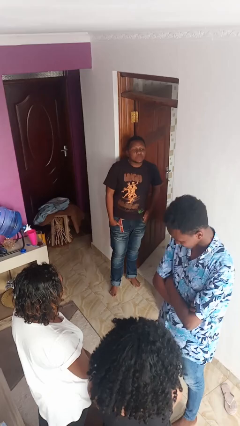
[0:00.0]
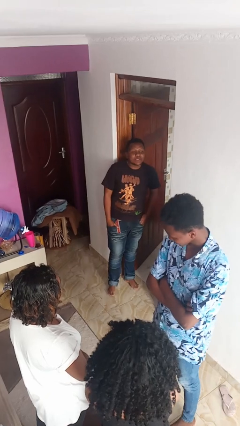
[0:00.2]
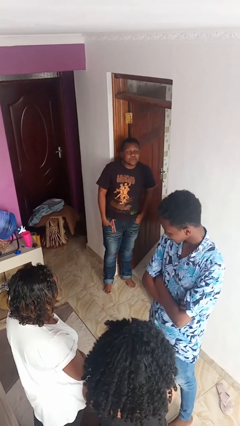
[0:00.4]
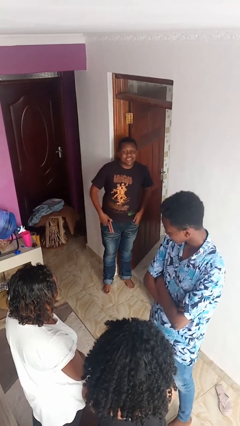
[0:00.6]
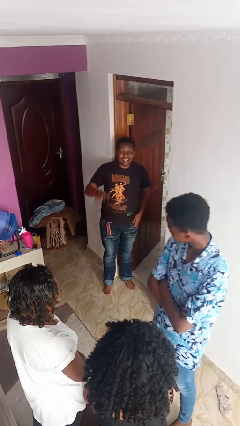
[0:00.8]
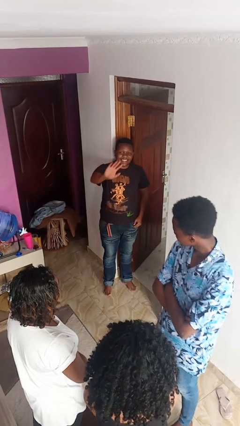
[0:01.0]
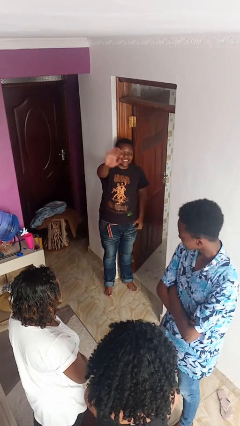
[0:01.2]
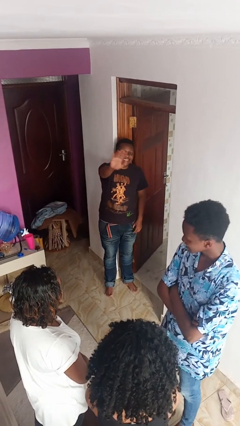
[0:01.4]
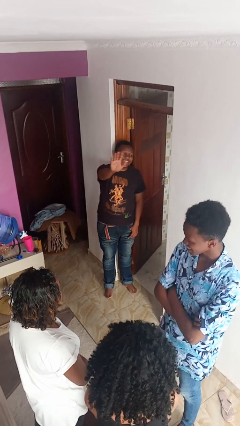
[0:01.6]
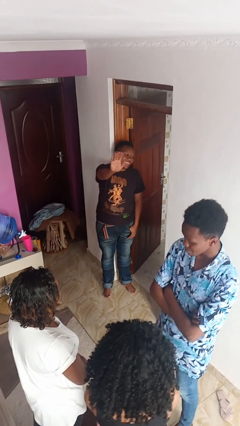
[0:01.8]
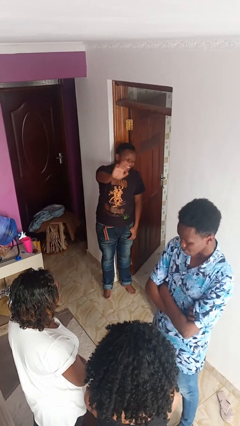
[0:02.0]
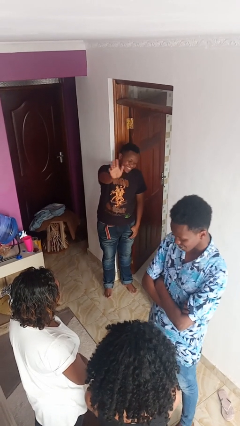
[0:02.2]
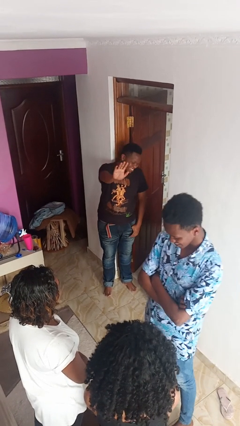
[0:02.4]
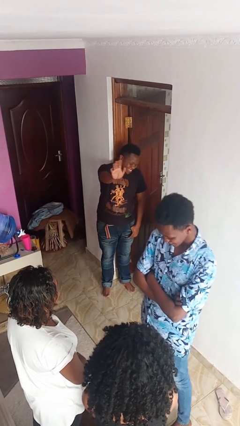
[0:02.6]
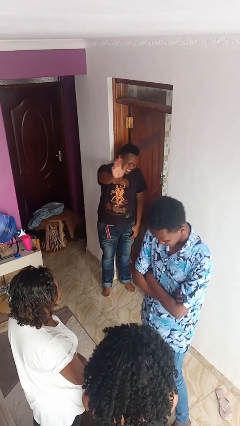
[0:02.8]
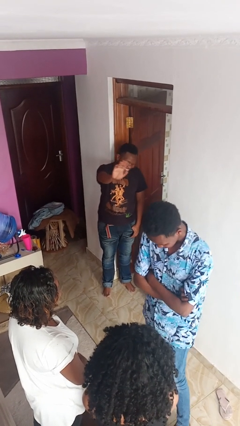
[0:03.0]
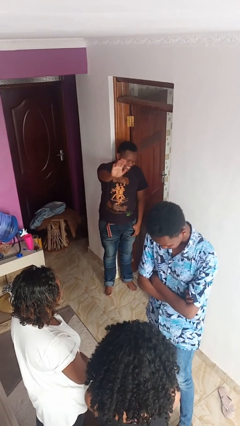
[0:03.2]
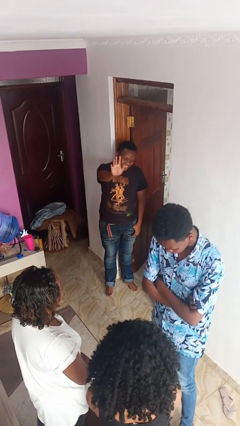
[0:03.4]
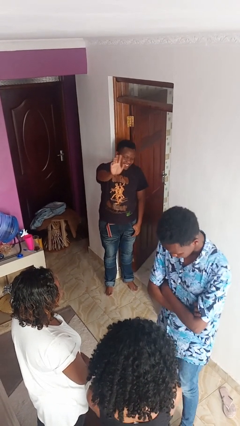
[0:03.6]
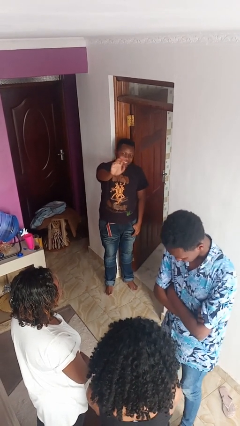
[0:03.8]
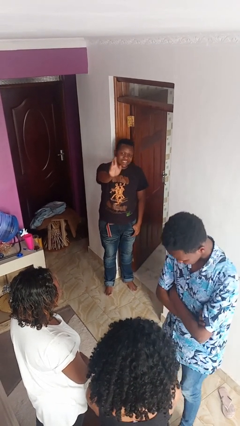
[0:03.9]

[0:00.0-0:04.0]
person waves at person

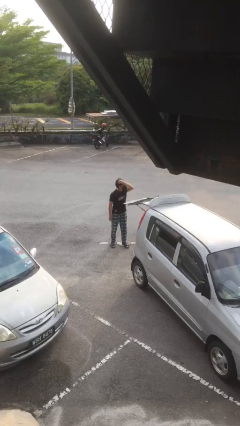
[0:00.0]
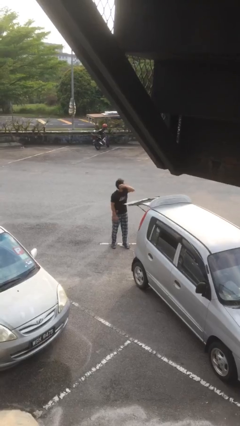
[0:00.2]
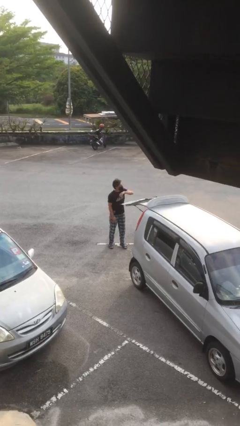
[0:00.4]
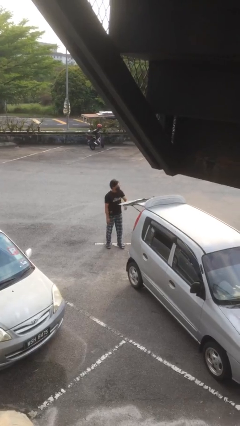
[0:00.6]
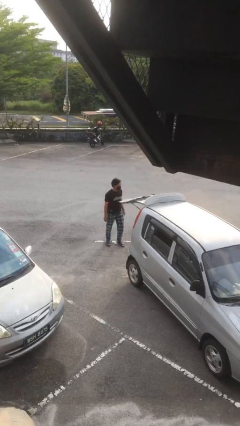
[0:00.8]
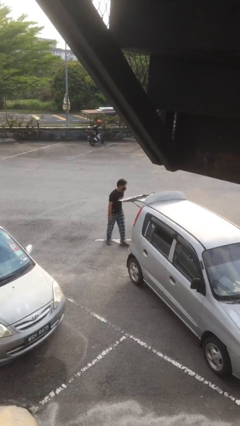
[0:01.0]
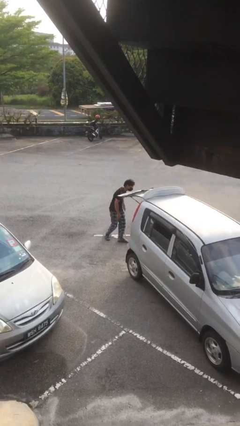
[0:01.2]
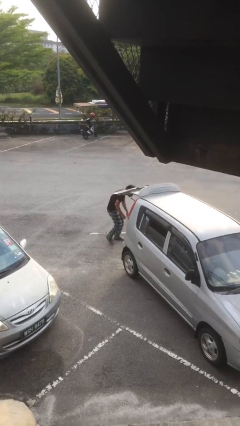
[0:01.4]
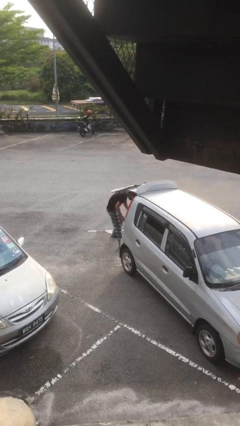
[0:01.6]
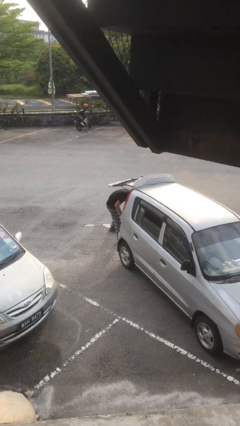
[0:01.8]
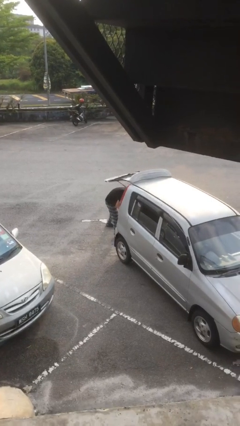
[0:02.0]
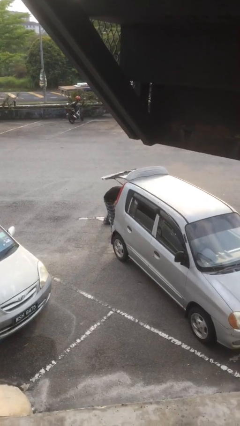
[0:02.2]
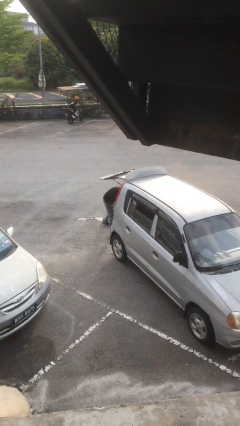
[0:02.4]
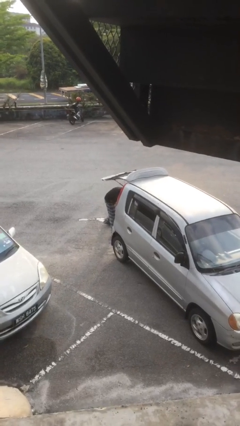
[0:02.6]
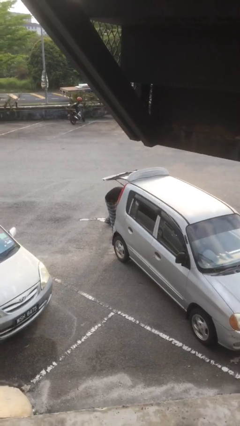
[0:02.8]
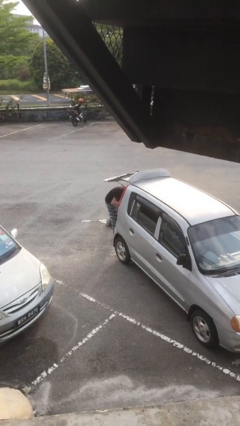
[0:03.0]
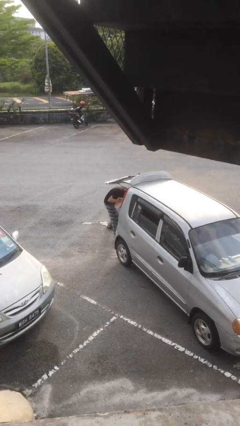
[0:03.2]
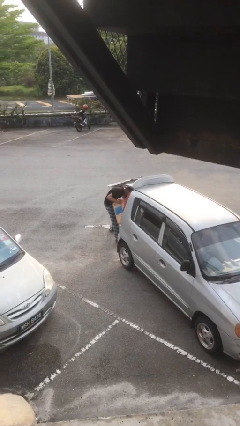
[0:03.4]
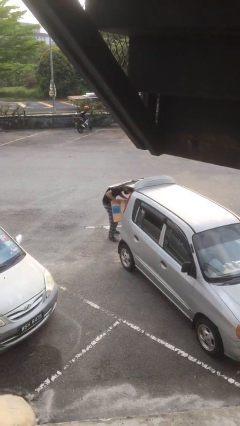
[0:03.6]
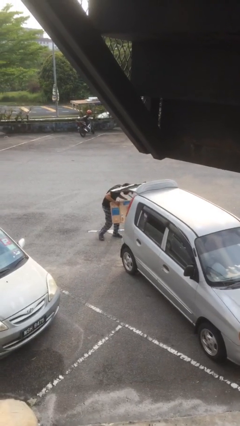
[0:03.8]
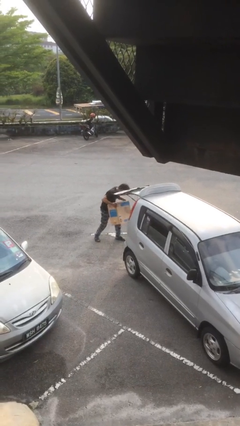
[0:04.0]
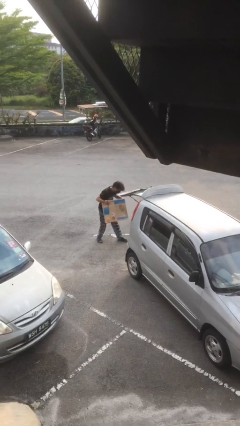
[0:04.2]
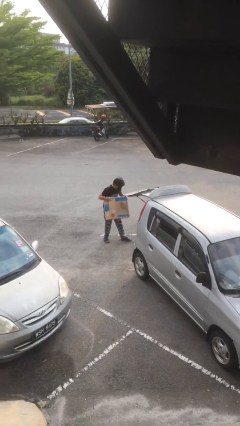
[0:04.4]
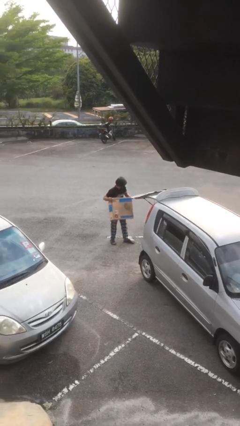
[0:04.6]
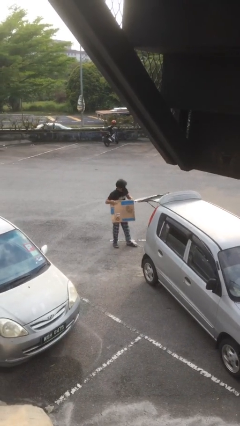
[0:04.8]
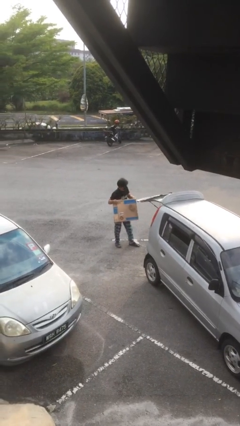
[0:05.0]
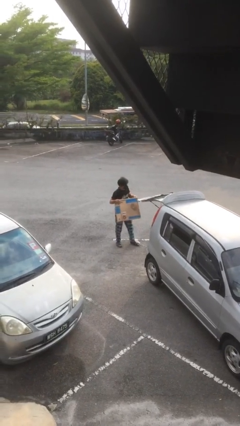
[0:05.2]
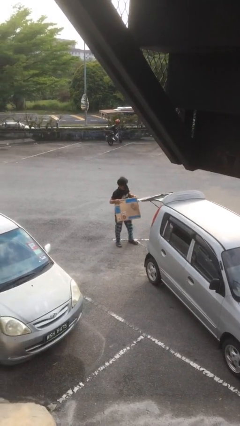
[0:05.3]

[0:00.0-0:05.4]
person unloads car

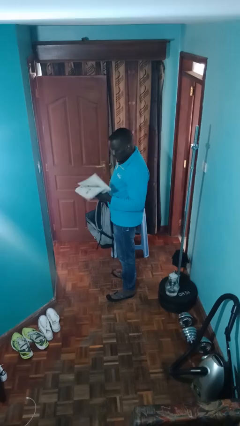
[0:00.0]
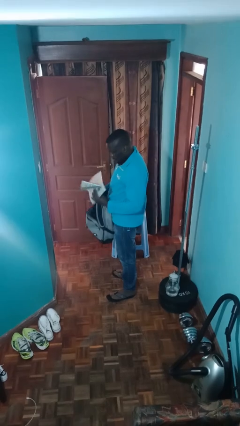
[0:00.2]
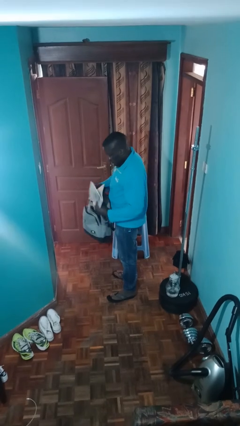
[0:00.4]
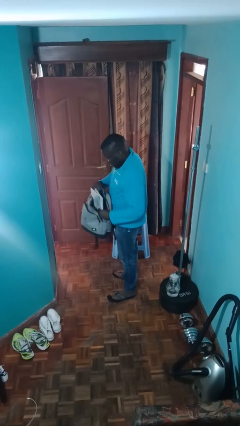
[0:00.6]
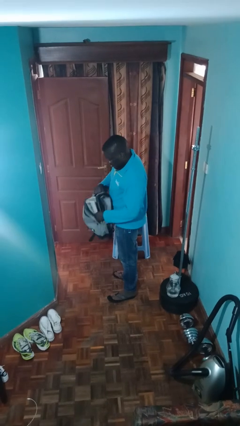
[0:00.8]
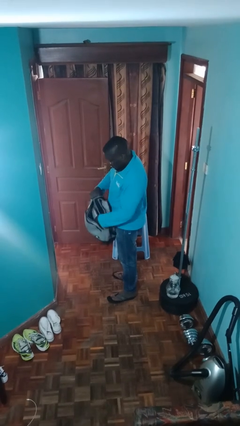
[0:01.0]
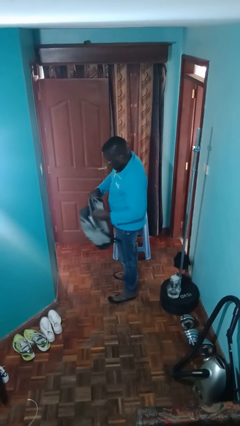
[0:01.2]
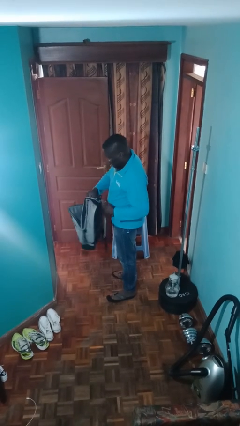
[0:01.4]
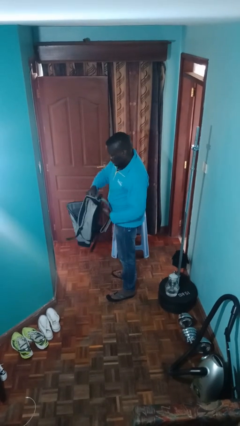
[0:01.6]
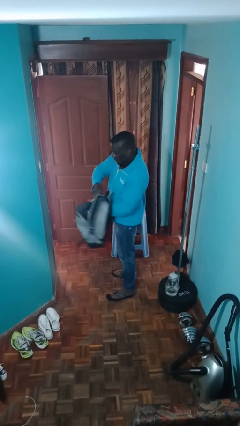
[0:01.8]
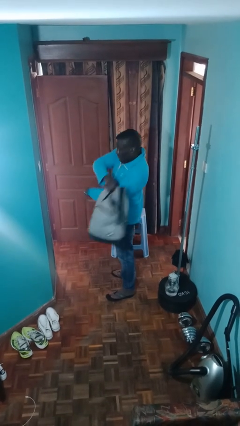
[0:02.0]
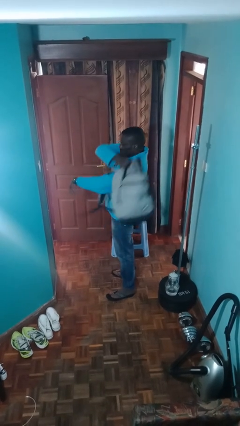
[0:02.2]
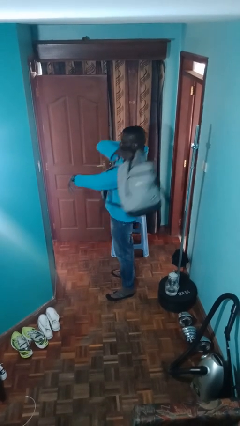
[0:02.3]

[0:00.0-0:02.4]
person puts object into backpack

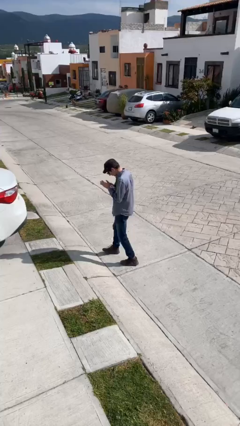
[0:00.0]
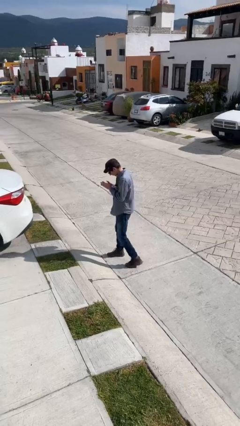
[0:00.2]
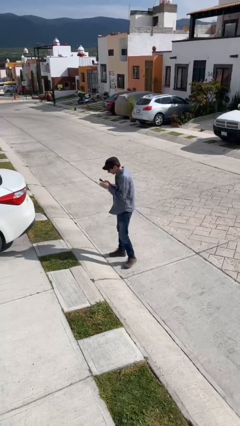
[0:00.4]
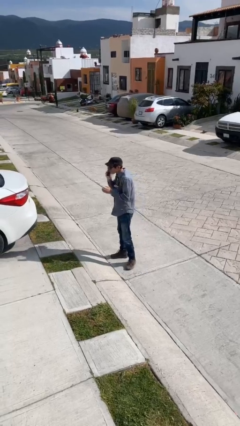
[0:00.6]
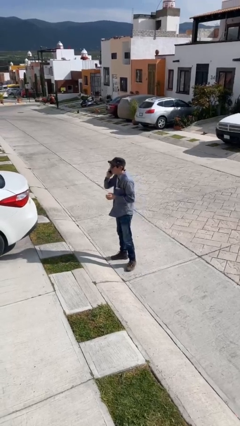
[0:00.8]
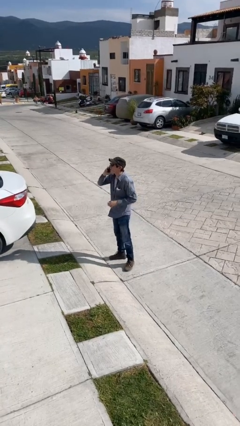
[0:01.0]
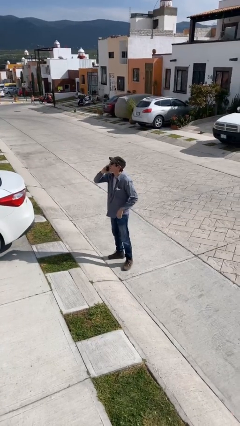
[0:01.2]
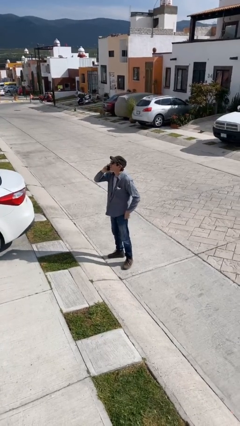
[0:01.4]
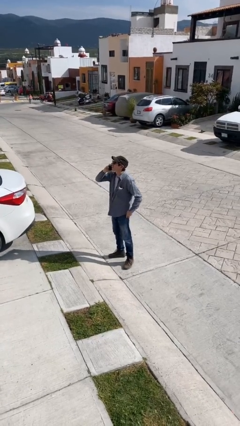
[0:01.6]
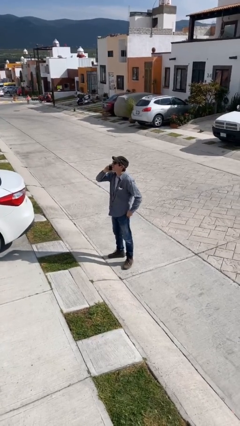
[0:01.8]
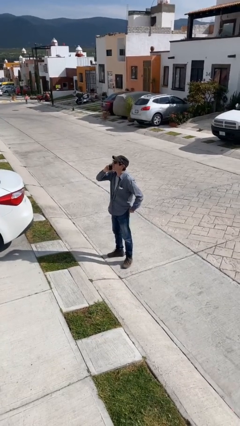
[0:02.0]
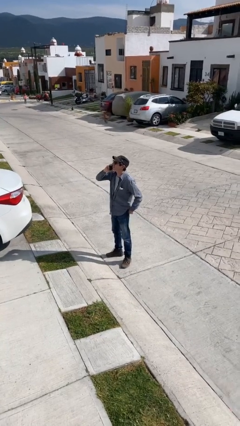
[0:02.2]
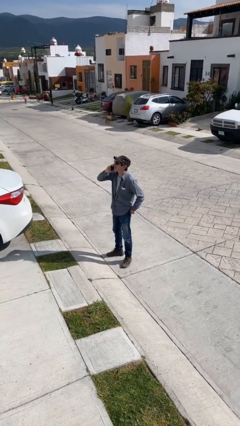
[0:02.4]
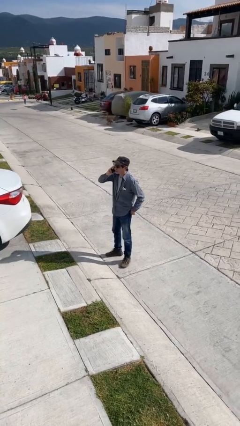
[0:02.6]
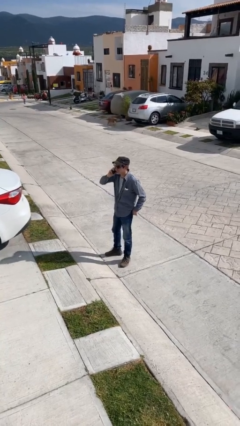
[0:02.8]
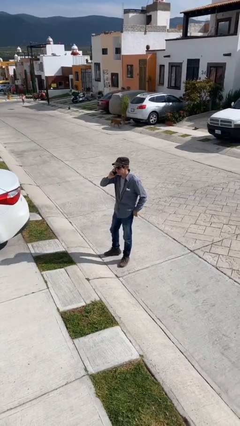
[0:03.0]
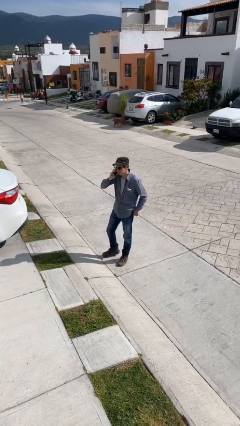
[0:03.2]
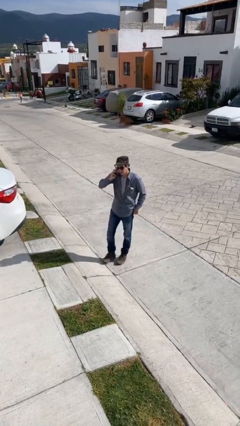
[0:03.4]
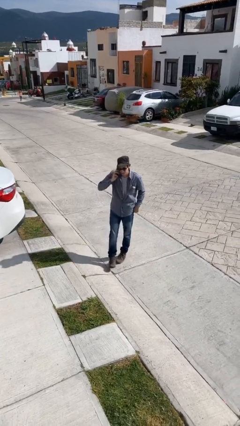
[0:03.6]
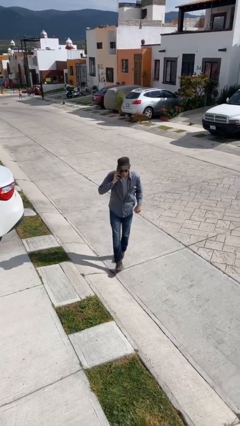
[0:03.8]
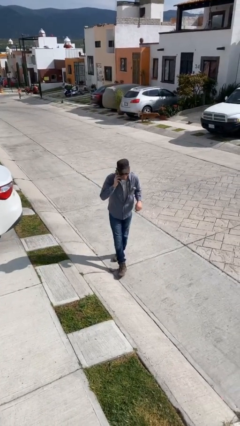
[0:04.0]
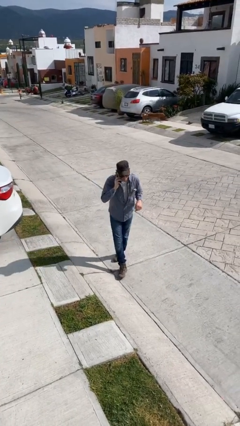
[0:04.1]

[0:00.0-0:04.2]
person talks on phone

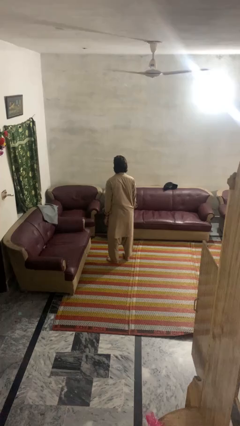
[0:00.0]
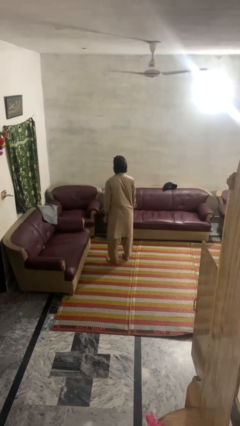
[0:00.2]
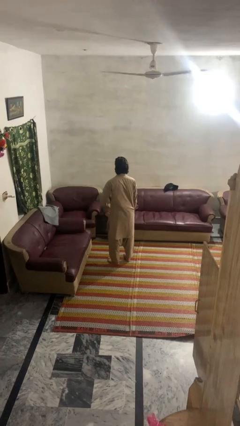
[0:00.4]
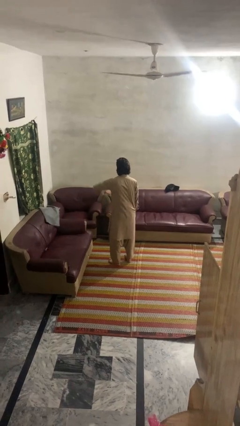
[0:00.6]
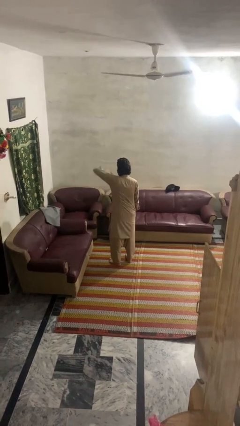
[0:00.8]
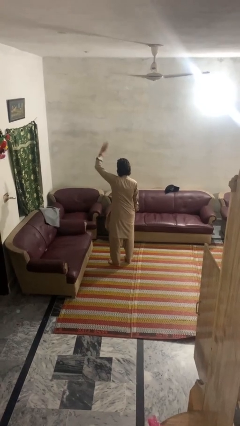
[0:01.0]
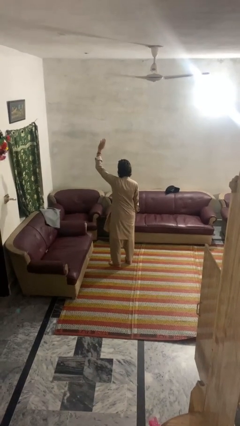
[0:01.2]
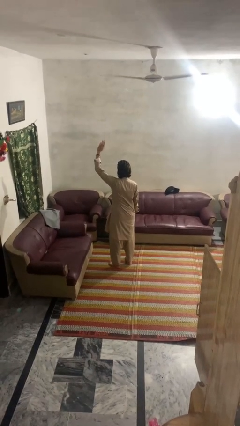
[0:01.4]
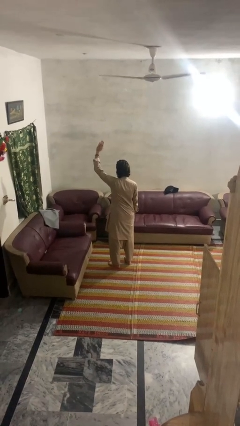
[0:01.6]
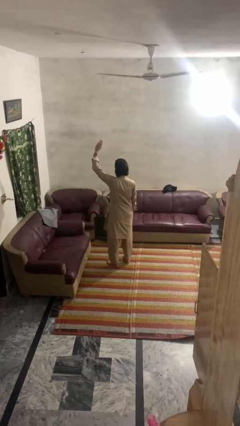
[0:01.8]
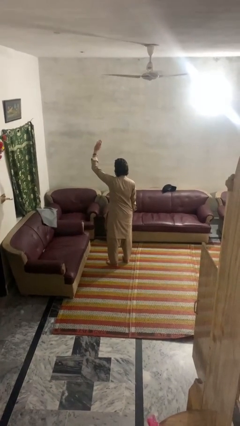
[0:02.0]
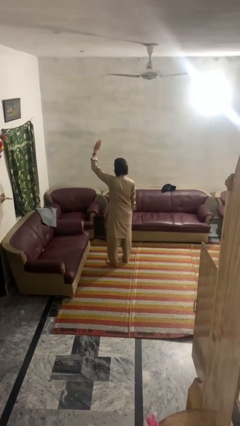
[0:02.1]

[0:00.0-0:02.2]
person gestures swipe up
